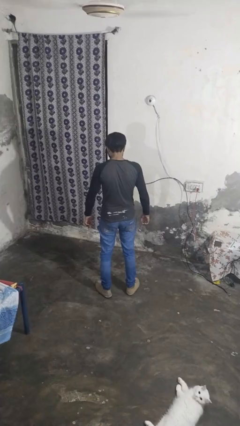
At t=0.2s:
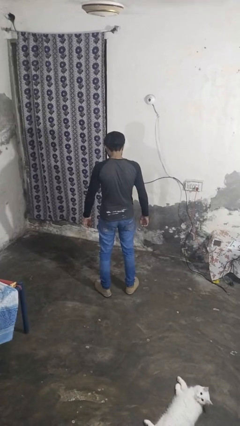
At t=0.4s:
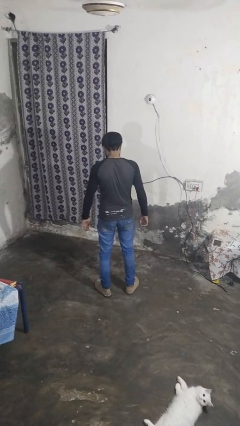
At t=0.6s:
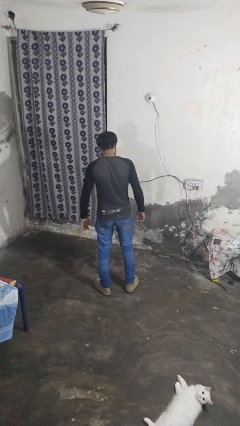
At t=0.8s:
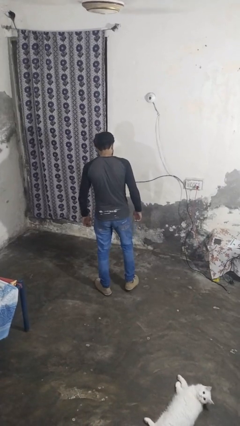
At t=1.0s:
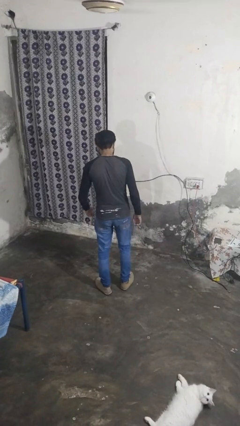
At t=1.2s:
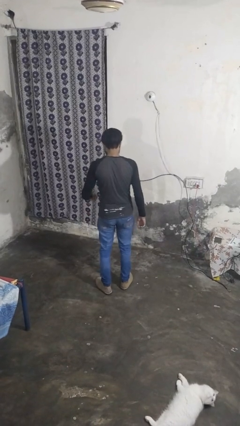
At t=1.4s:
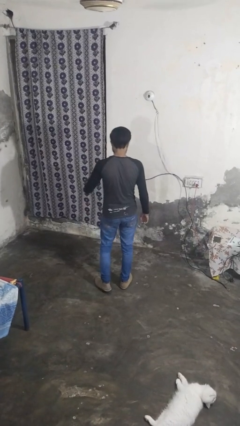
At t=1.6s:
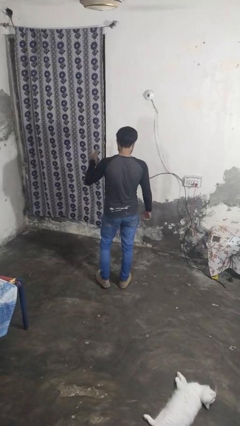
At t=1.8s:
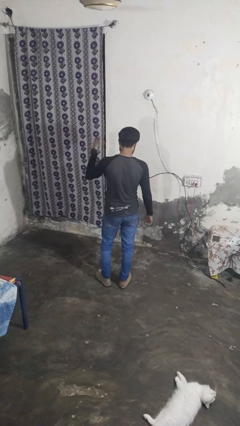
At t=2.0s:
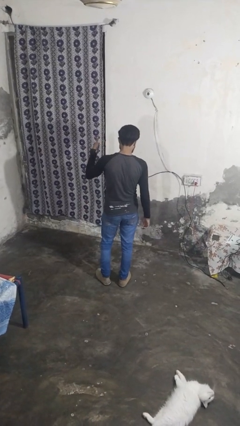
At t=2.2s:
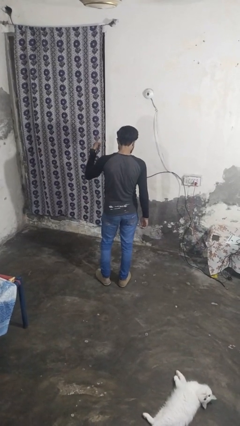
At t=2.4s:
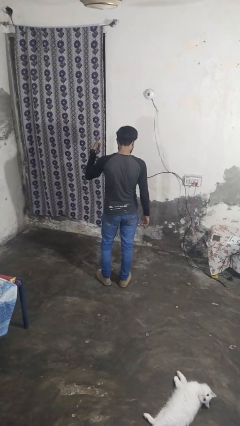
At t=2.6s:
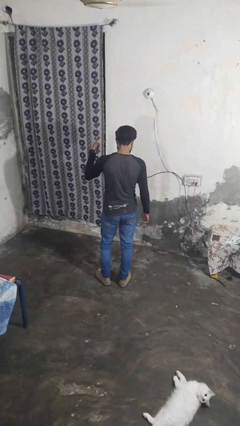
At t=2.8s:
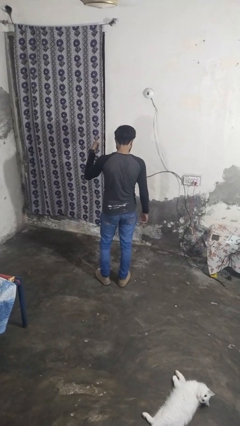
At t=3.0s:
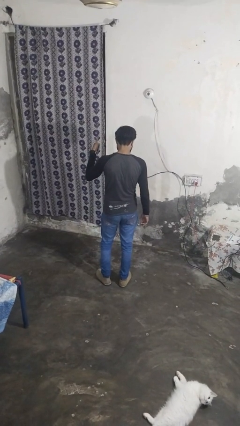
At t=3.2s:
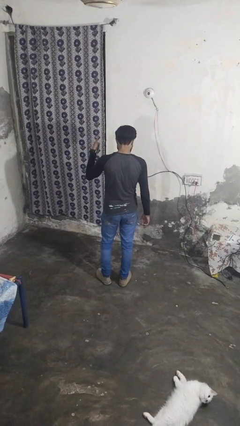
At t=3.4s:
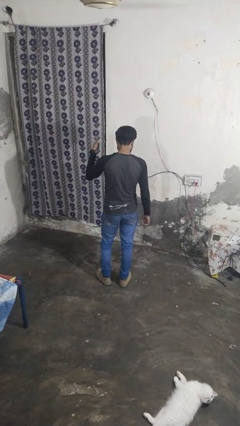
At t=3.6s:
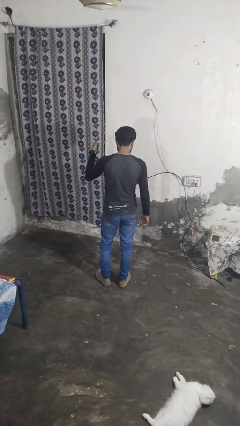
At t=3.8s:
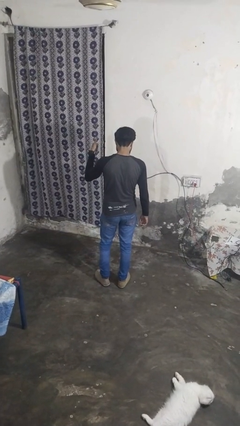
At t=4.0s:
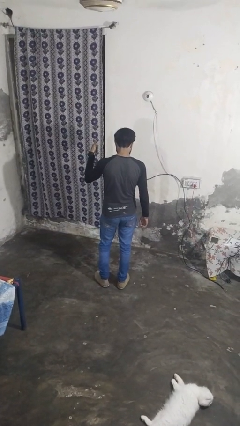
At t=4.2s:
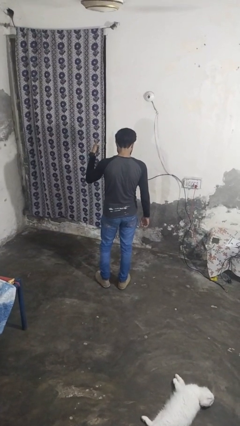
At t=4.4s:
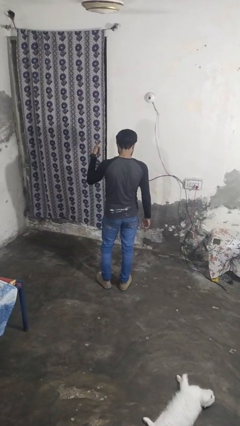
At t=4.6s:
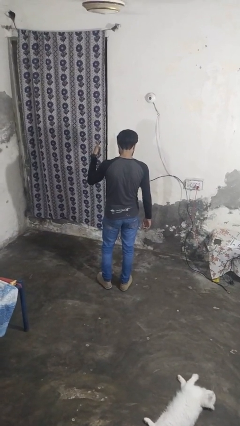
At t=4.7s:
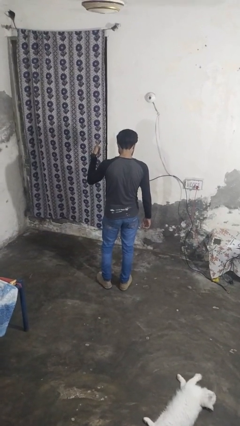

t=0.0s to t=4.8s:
person gestures thumbs up

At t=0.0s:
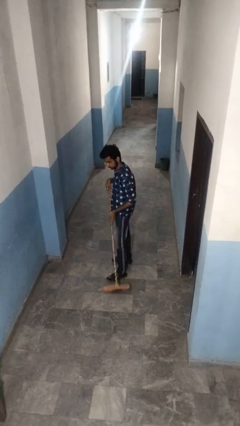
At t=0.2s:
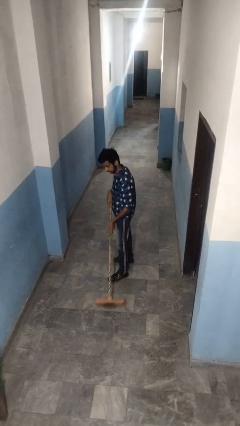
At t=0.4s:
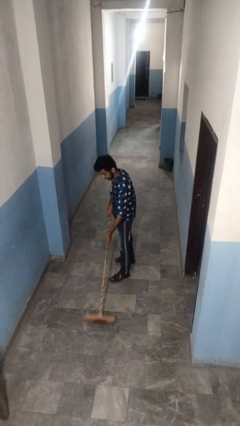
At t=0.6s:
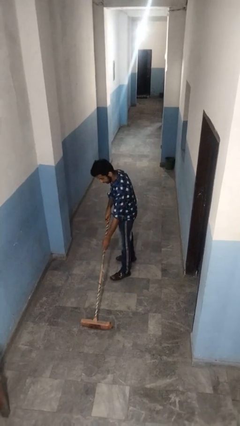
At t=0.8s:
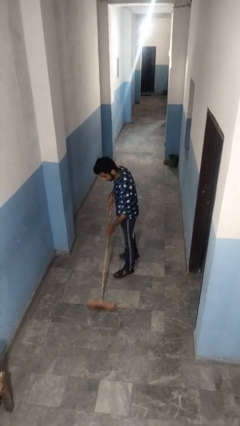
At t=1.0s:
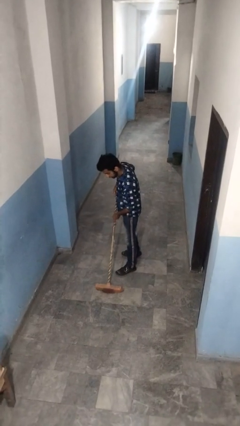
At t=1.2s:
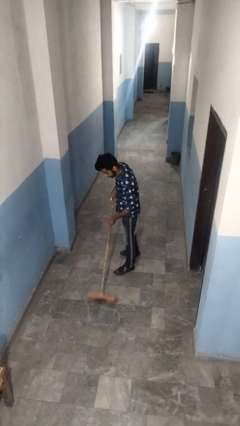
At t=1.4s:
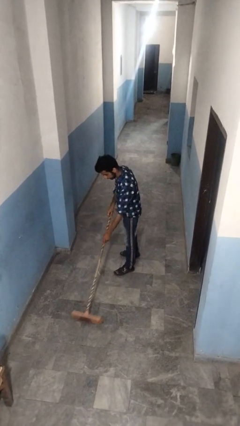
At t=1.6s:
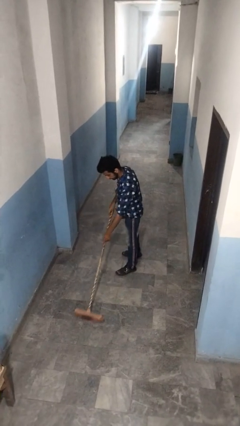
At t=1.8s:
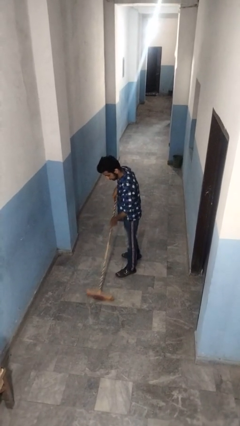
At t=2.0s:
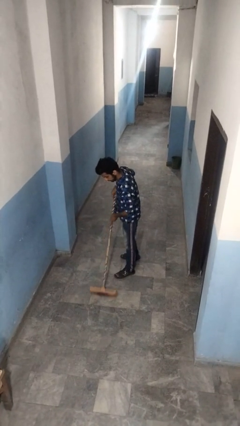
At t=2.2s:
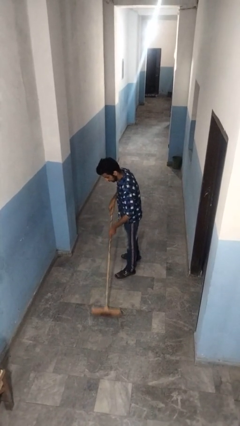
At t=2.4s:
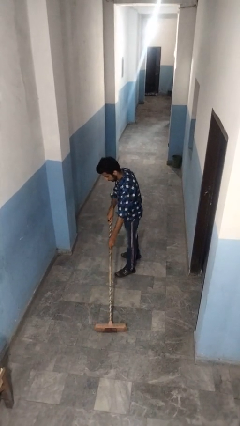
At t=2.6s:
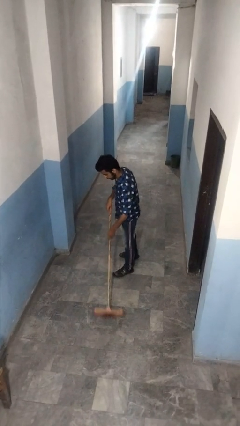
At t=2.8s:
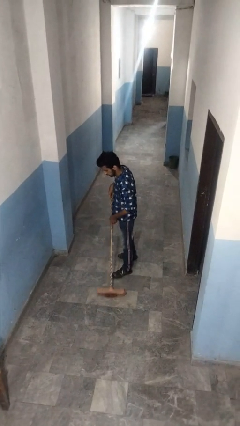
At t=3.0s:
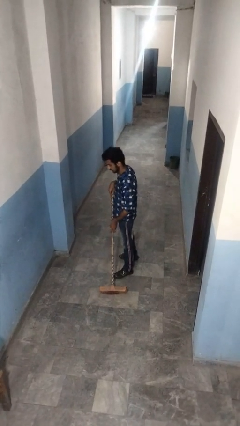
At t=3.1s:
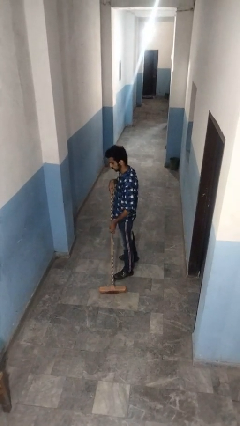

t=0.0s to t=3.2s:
person sweeps floor

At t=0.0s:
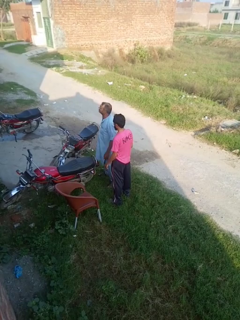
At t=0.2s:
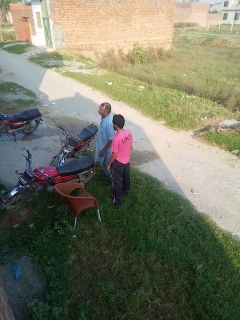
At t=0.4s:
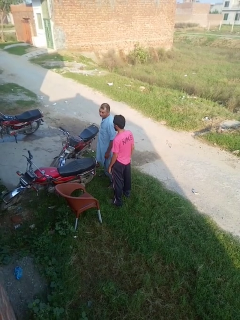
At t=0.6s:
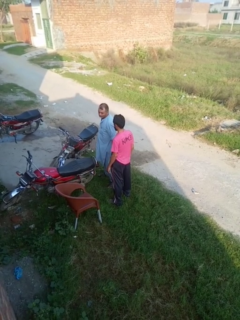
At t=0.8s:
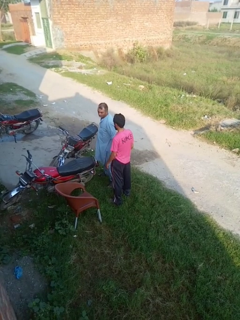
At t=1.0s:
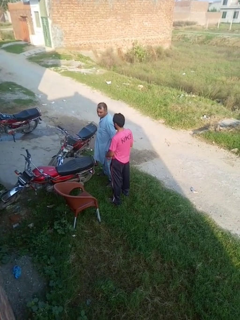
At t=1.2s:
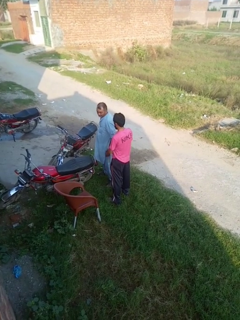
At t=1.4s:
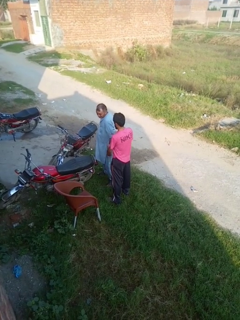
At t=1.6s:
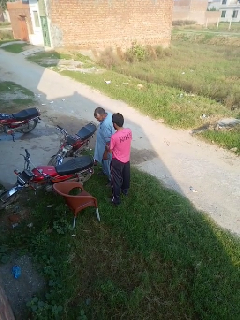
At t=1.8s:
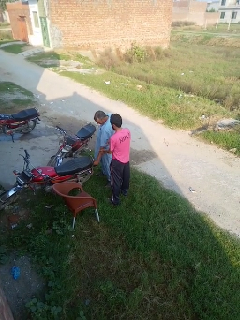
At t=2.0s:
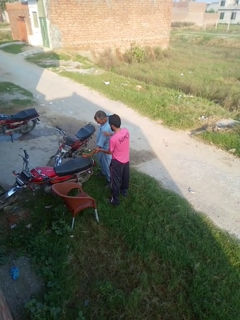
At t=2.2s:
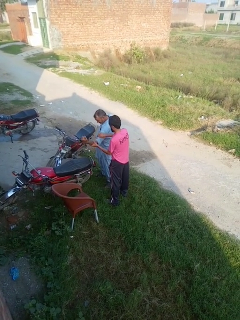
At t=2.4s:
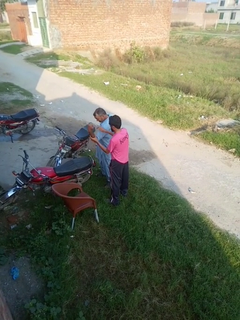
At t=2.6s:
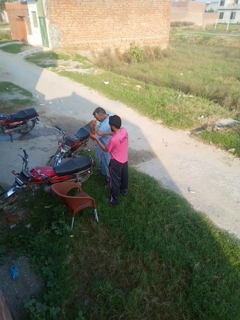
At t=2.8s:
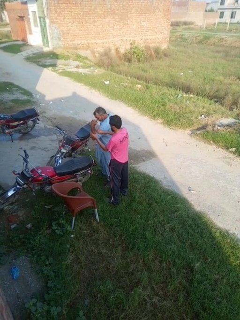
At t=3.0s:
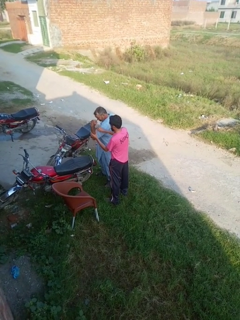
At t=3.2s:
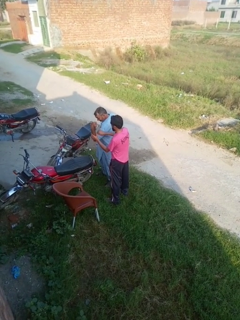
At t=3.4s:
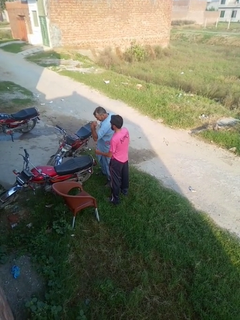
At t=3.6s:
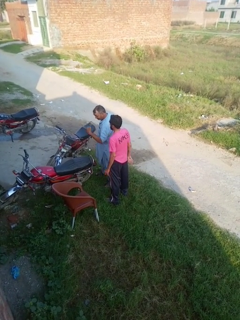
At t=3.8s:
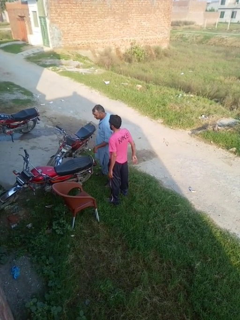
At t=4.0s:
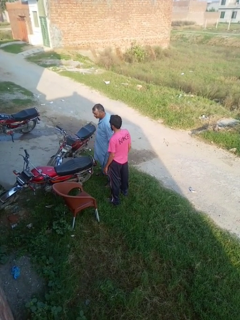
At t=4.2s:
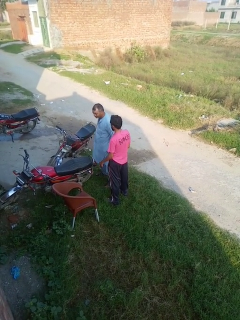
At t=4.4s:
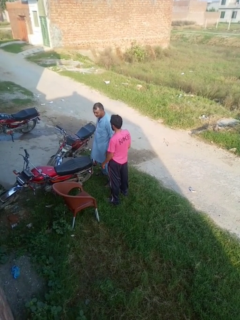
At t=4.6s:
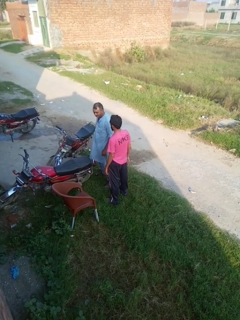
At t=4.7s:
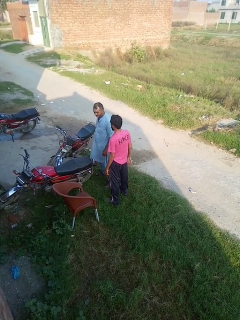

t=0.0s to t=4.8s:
person grabs person by bicep

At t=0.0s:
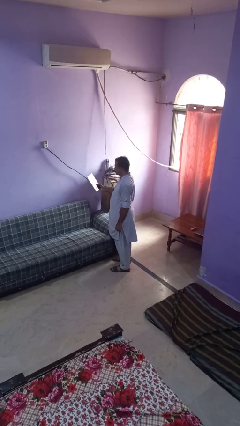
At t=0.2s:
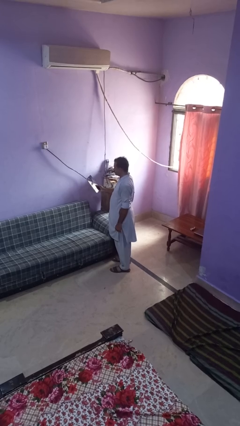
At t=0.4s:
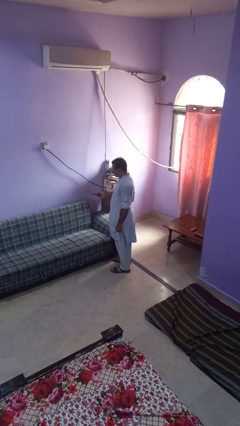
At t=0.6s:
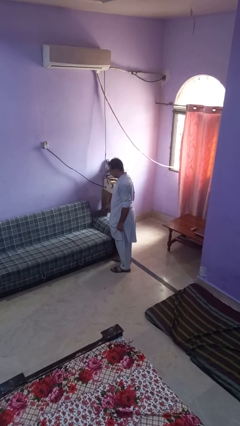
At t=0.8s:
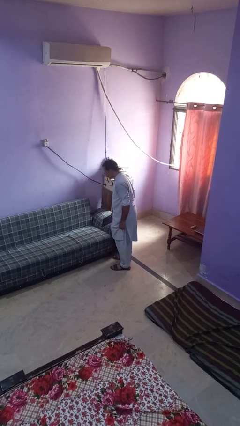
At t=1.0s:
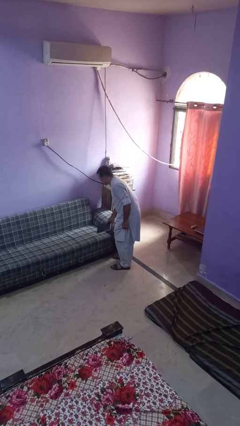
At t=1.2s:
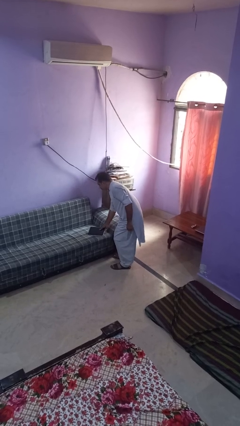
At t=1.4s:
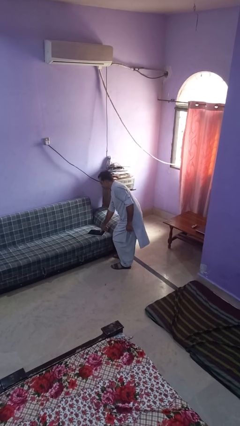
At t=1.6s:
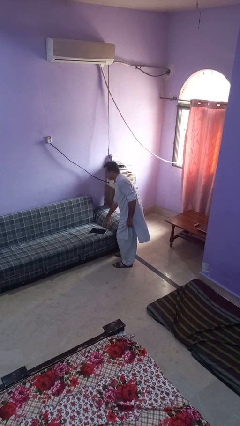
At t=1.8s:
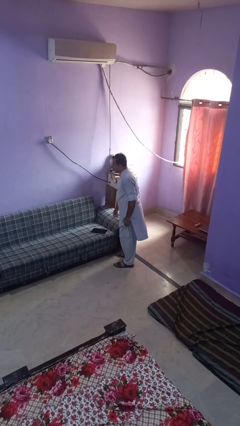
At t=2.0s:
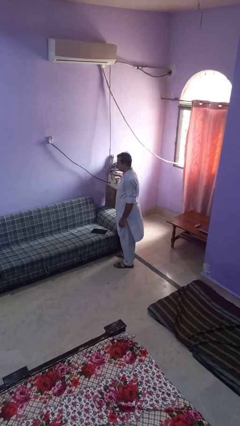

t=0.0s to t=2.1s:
person puts down object on couch

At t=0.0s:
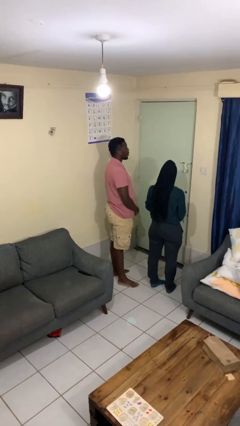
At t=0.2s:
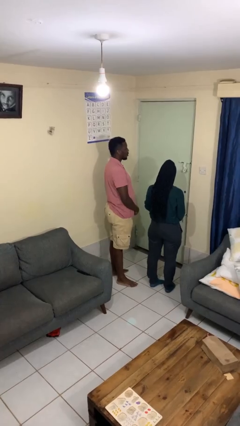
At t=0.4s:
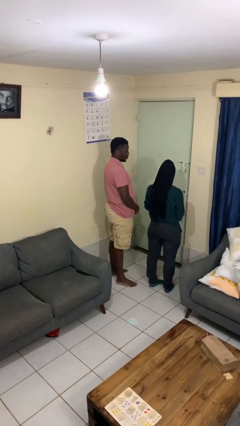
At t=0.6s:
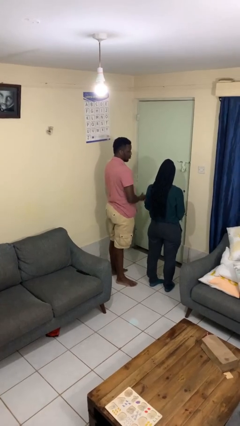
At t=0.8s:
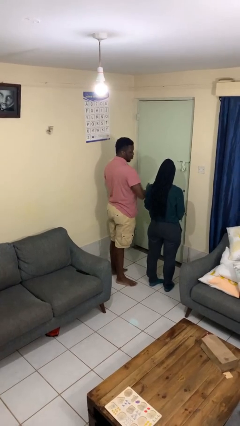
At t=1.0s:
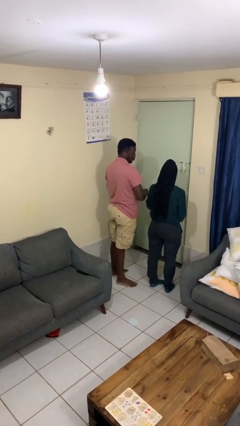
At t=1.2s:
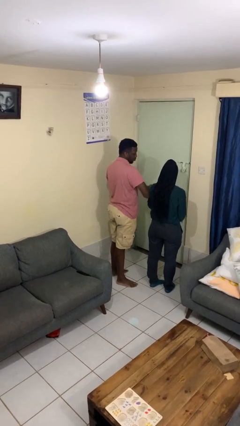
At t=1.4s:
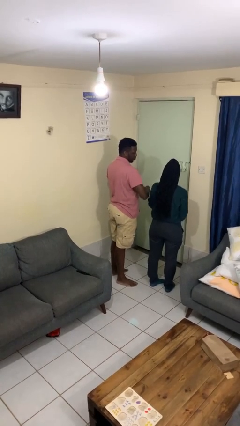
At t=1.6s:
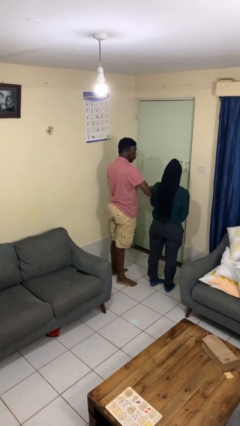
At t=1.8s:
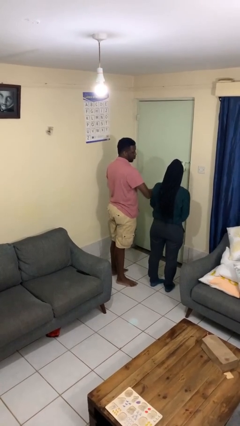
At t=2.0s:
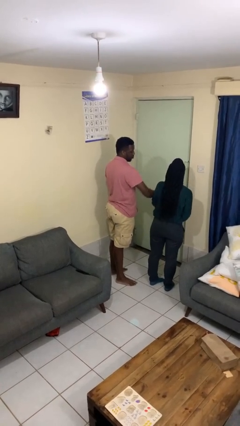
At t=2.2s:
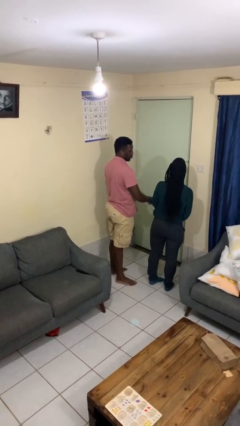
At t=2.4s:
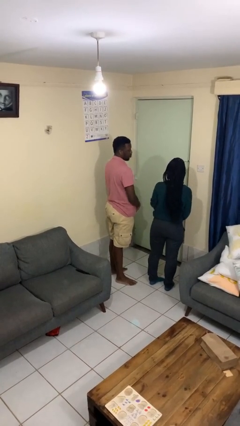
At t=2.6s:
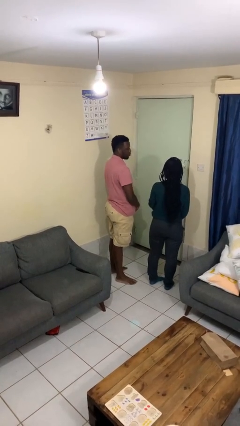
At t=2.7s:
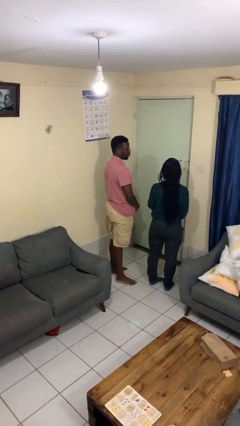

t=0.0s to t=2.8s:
person nudges person with elbow

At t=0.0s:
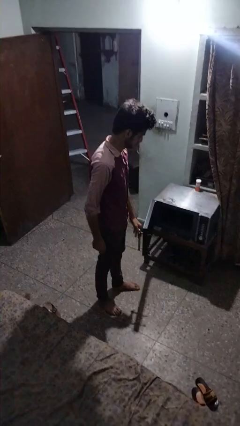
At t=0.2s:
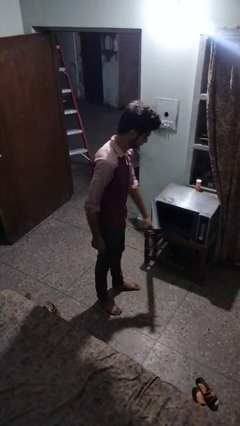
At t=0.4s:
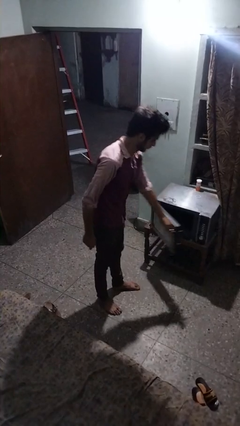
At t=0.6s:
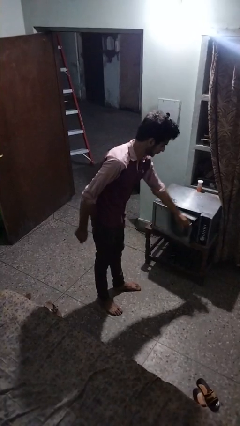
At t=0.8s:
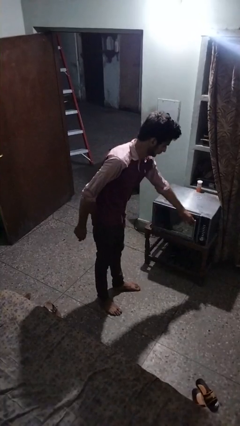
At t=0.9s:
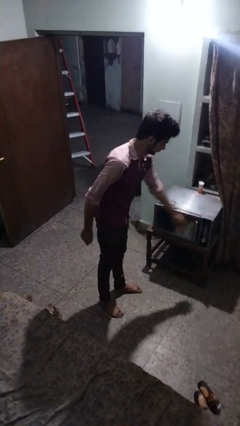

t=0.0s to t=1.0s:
person closes microwave
